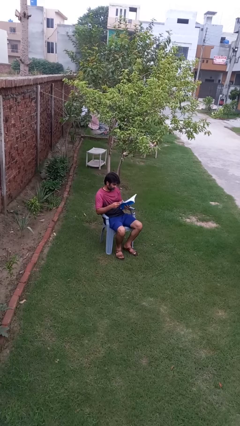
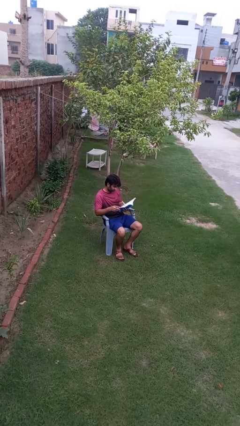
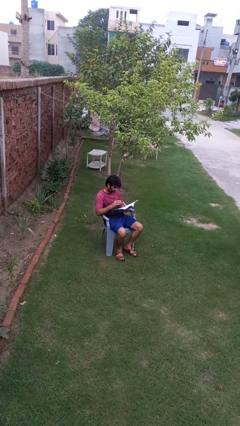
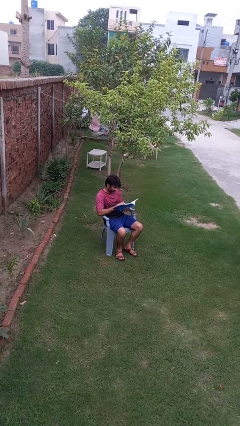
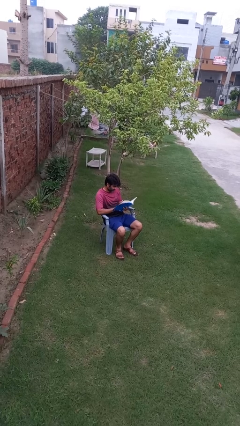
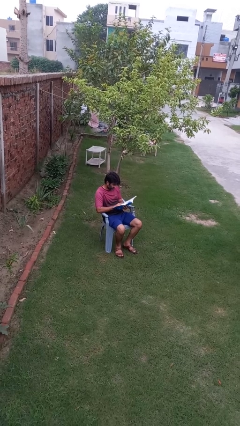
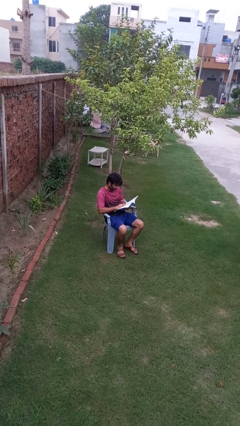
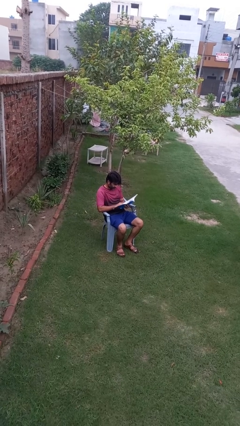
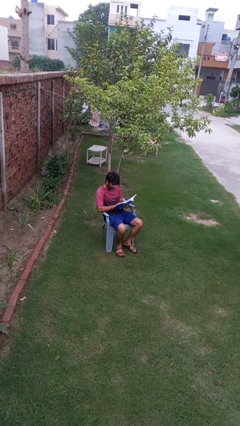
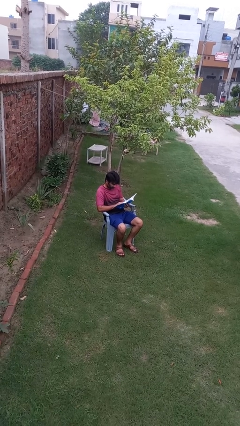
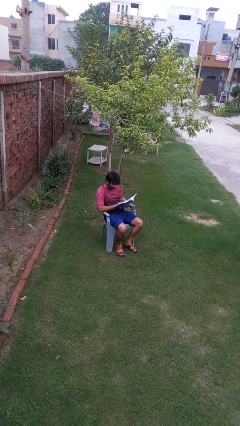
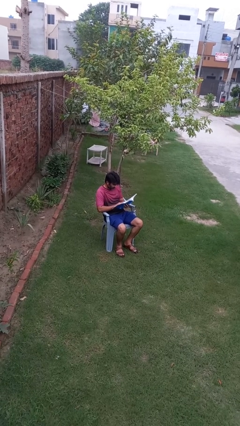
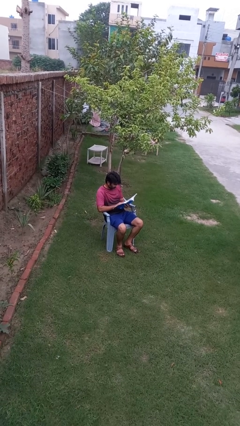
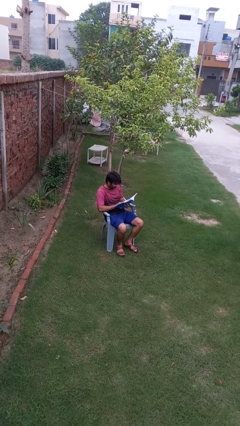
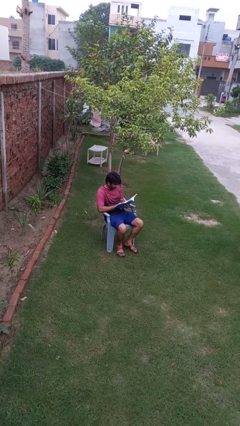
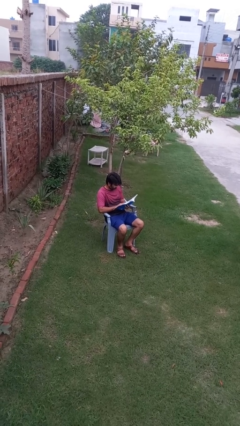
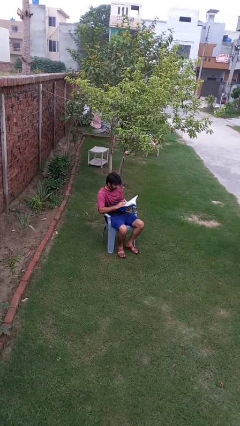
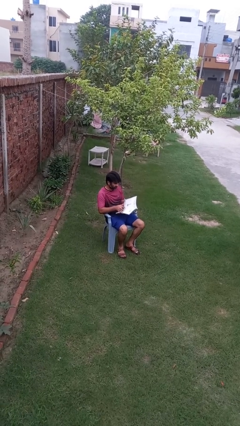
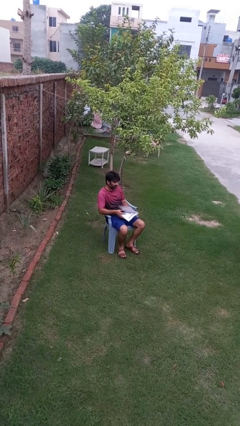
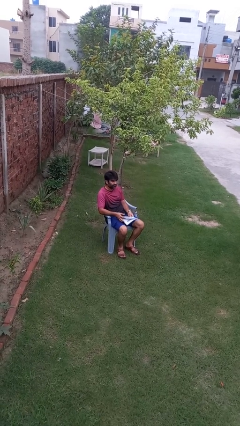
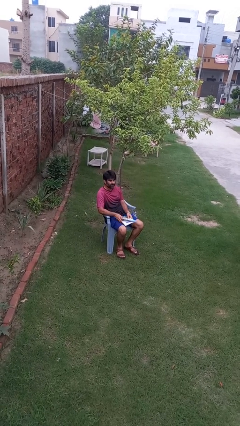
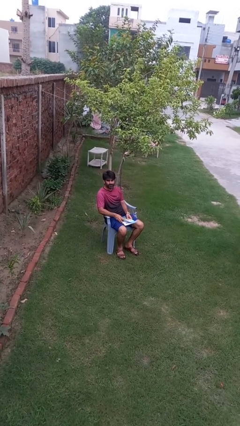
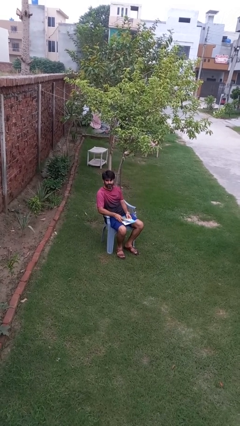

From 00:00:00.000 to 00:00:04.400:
person reads book

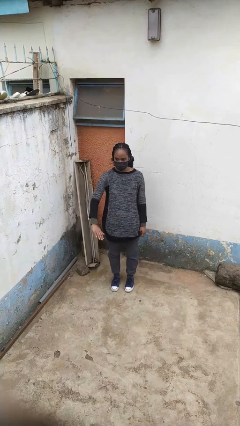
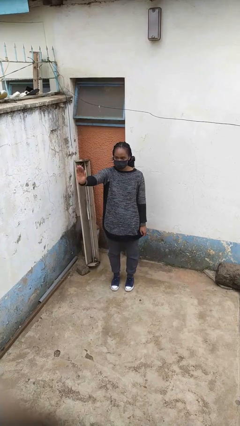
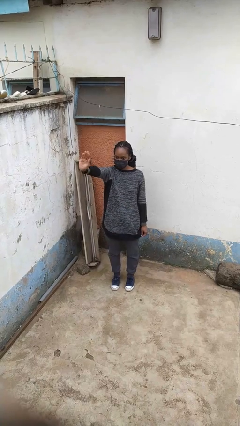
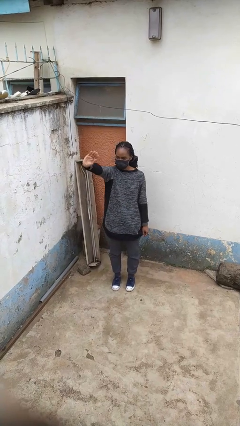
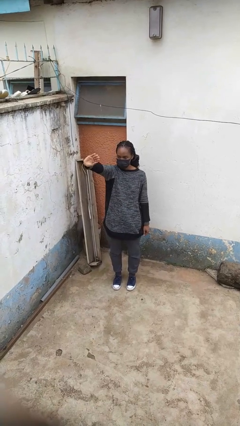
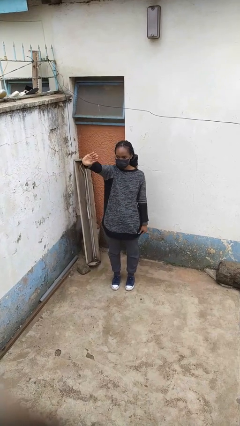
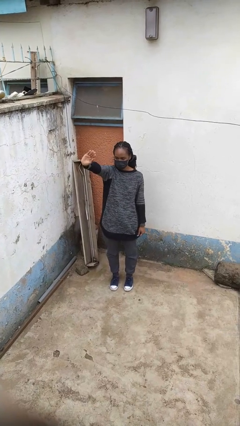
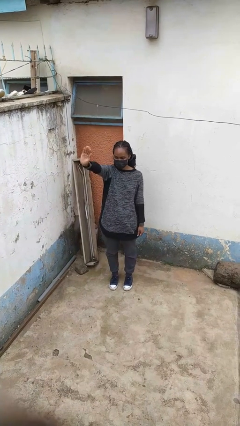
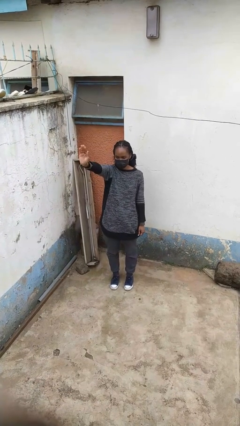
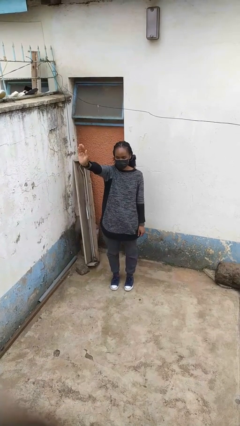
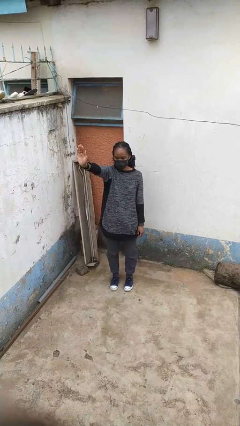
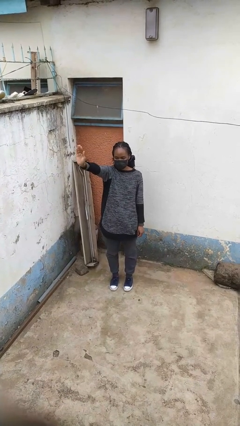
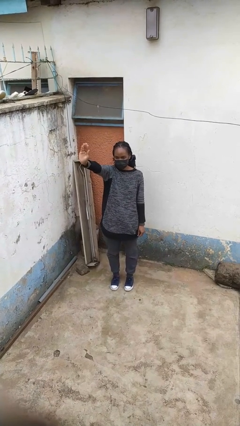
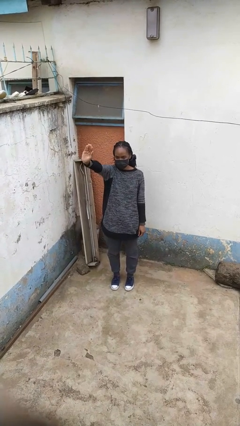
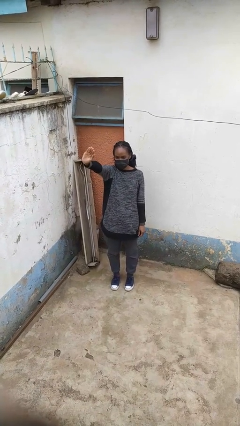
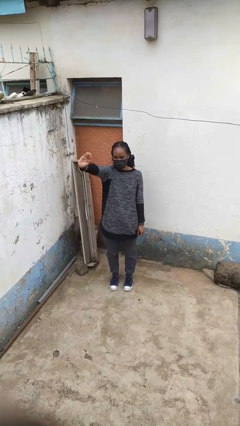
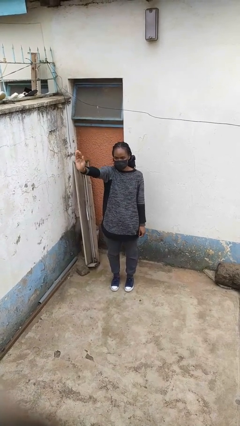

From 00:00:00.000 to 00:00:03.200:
person waves at person

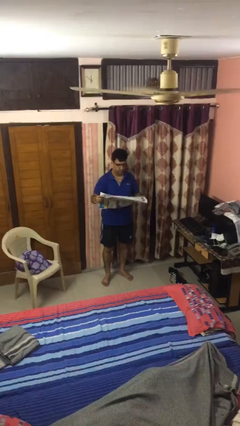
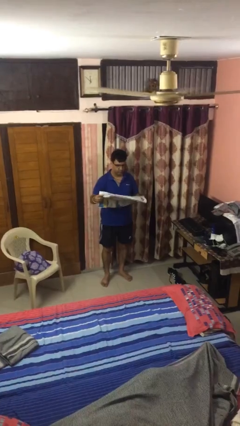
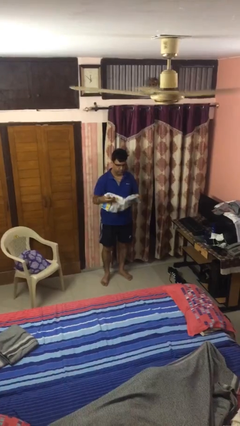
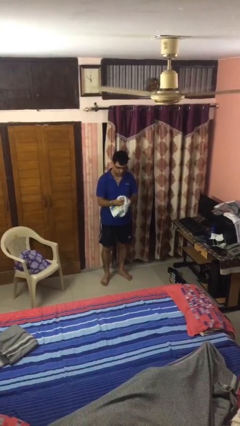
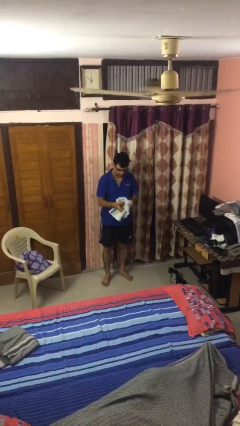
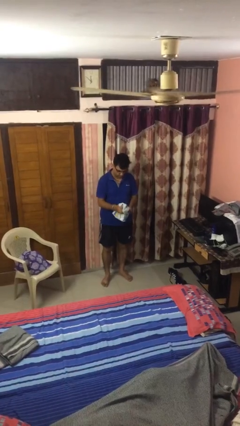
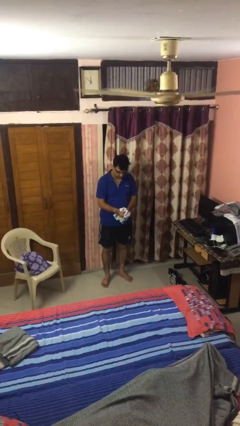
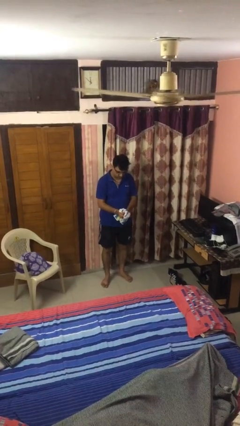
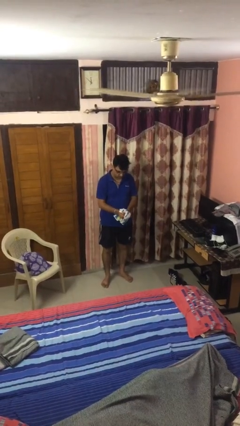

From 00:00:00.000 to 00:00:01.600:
person crumples paper

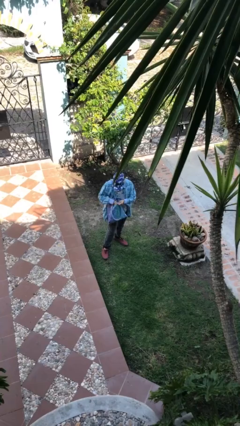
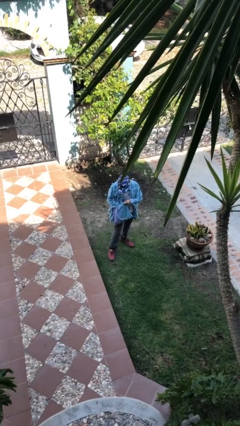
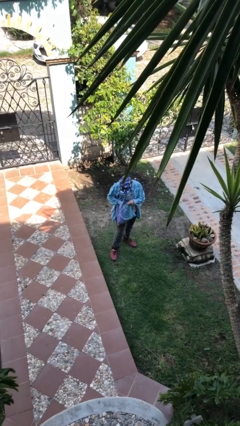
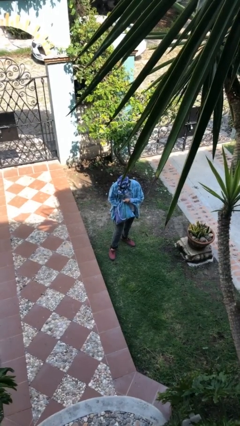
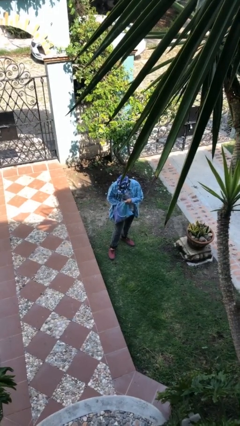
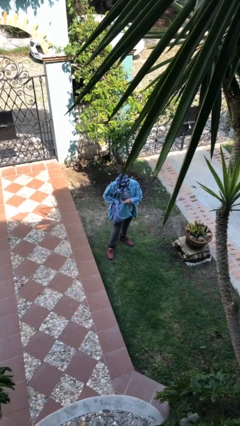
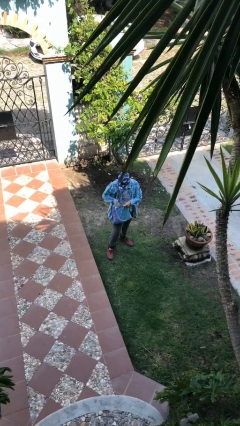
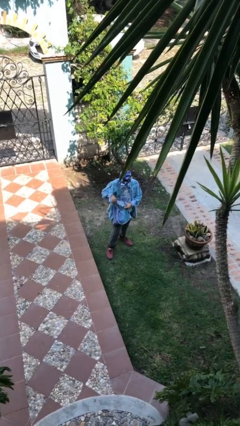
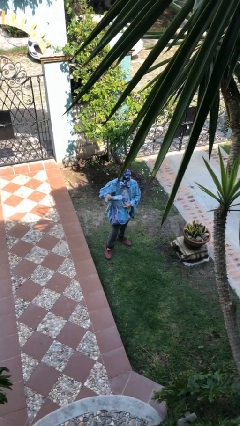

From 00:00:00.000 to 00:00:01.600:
person searches in purse

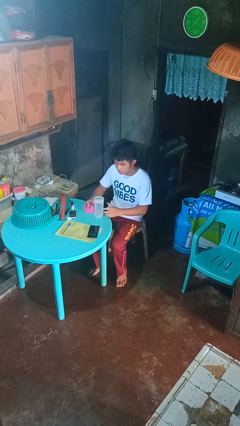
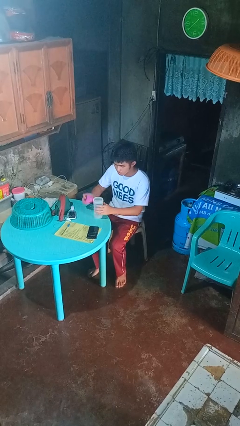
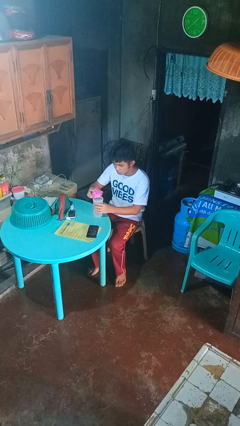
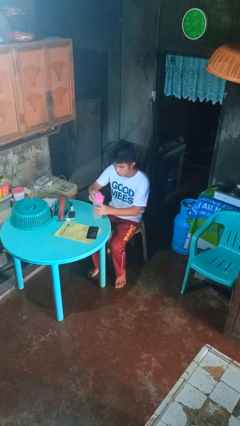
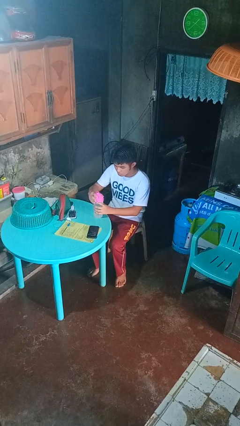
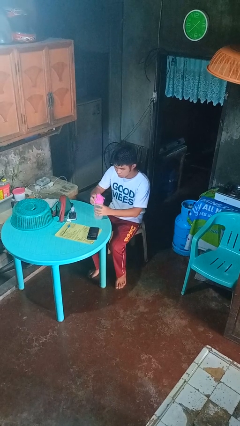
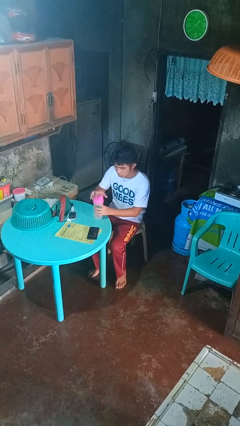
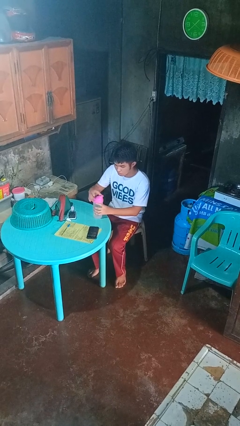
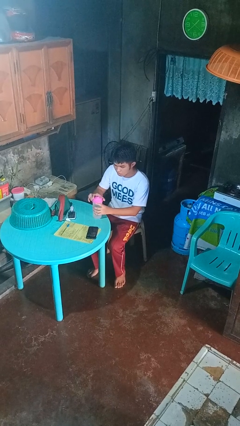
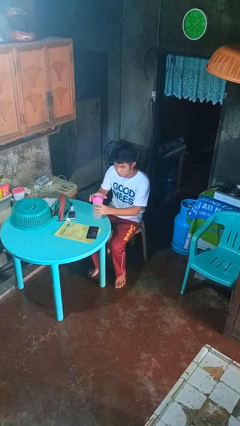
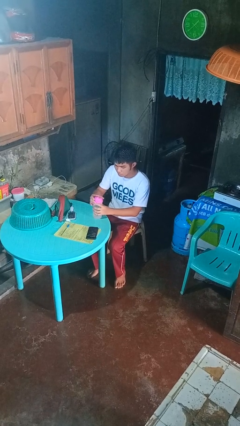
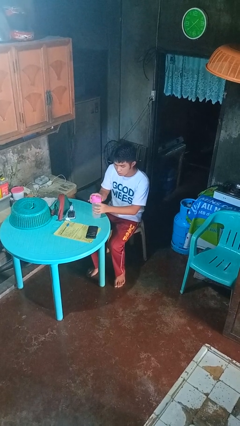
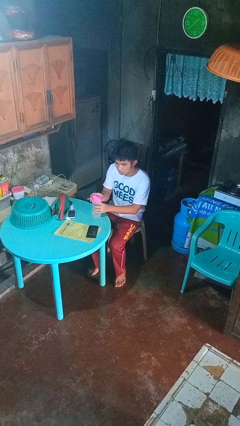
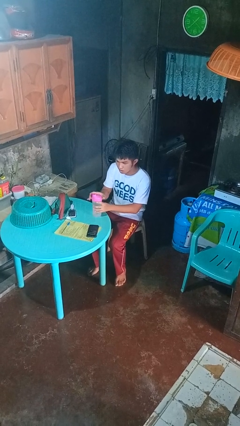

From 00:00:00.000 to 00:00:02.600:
person screws lid to bottle

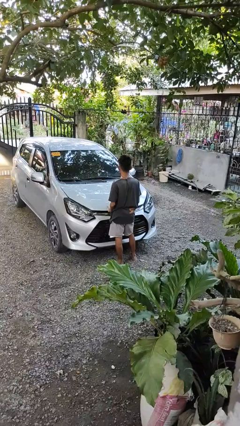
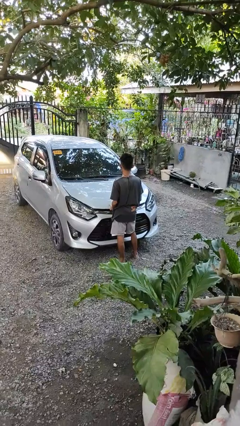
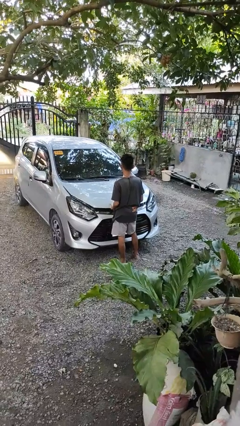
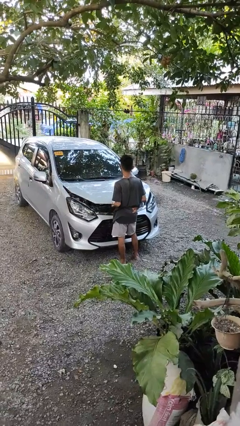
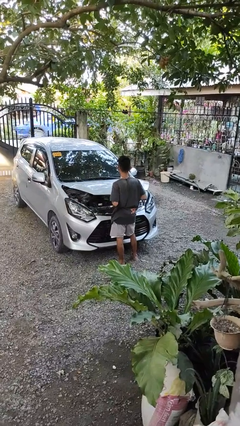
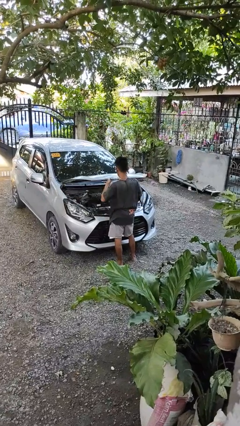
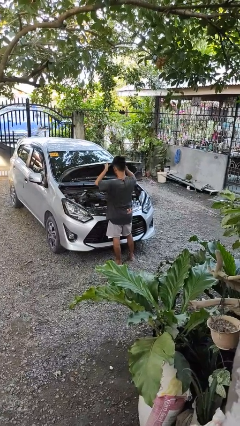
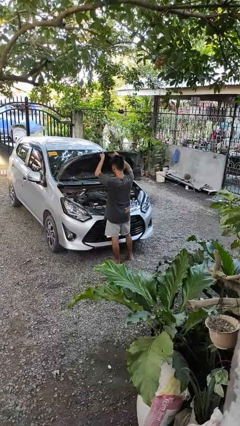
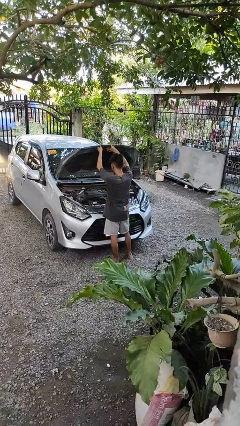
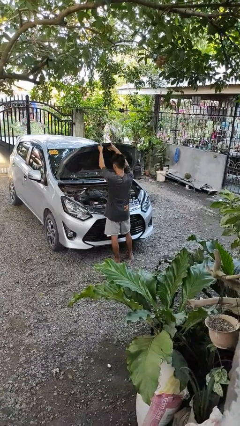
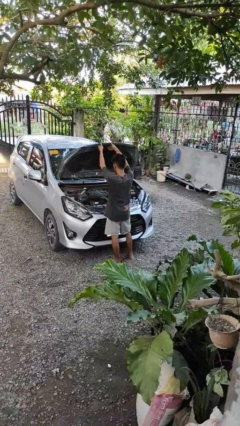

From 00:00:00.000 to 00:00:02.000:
person opens car hood

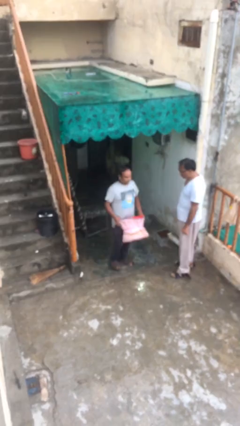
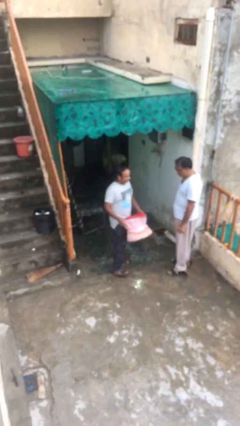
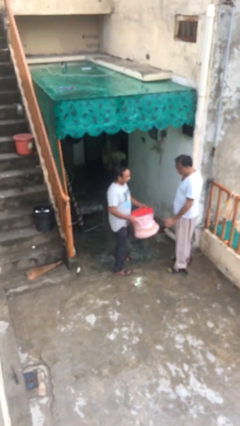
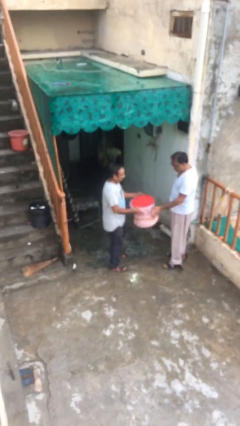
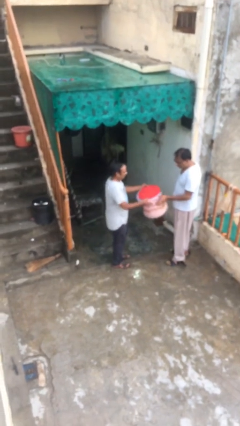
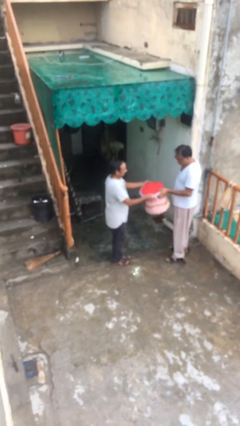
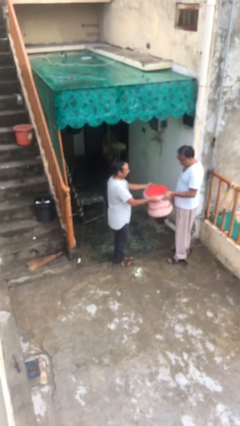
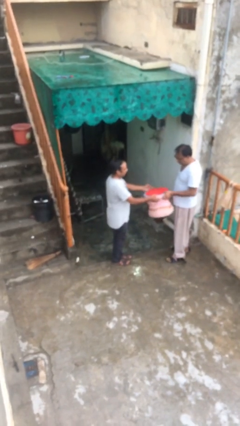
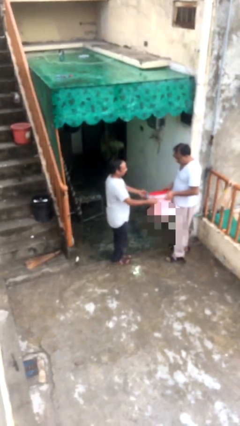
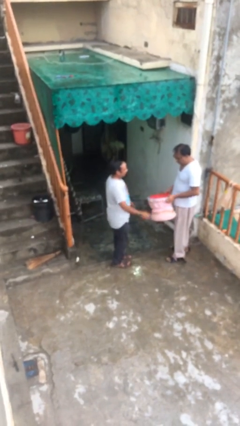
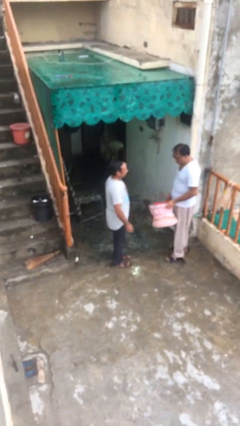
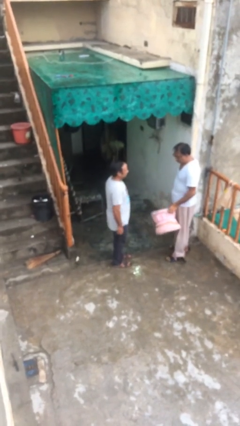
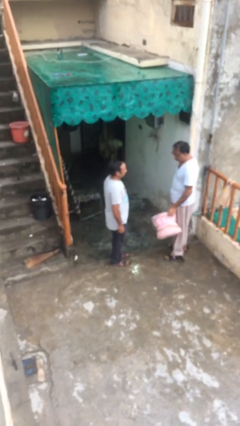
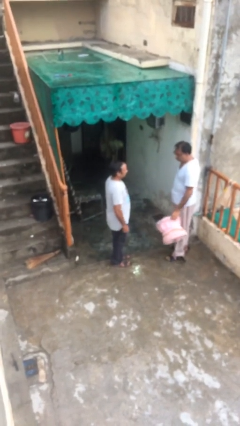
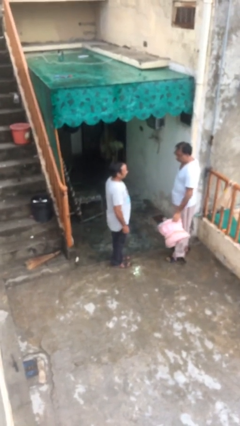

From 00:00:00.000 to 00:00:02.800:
person transfers object to person
